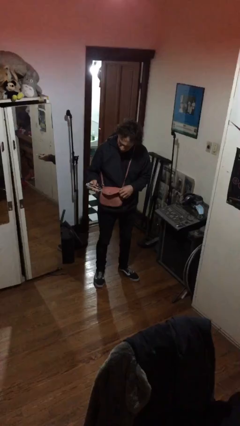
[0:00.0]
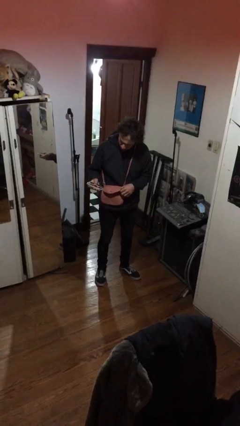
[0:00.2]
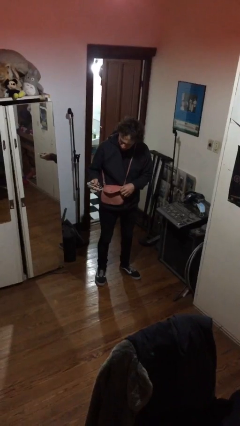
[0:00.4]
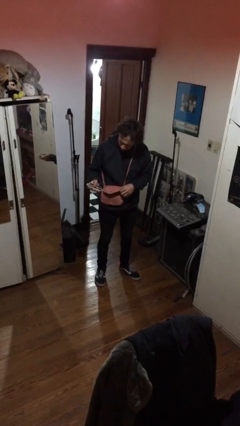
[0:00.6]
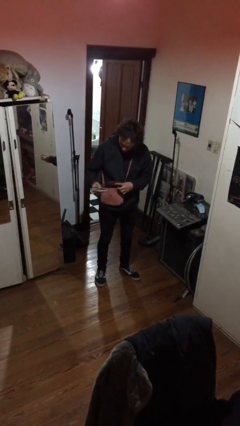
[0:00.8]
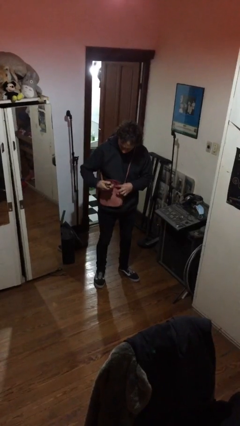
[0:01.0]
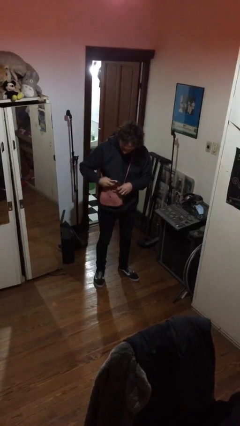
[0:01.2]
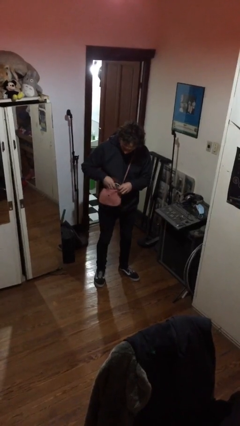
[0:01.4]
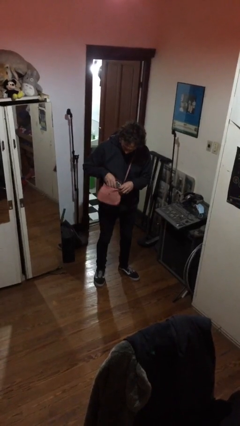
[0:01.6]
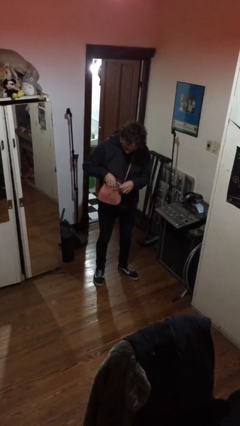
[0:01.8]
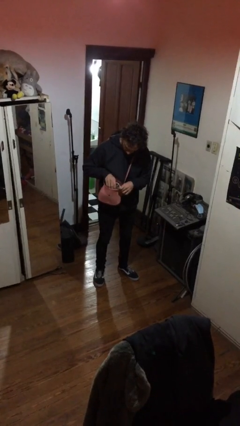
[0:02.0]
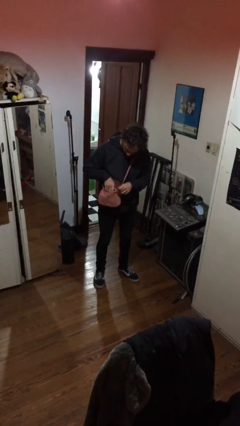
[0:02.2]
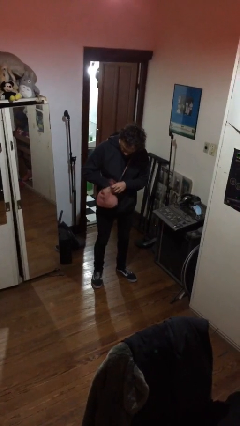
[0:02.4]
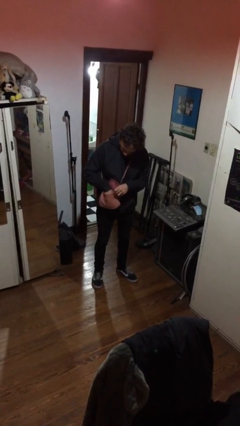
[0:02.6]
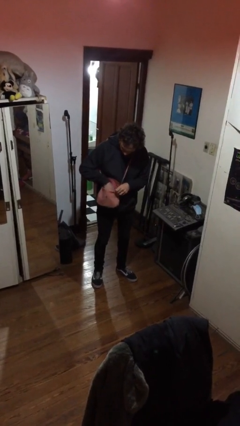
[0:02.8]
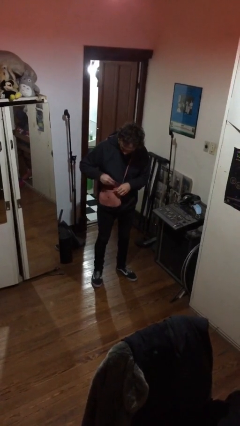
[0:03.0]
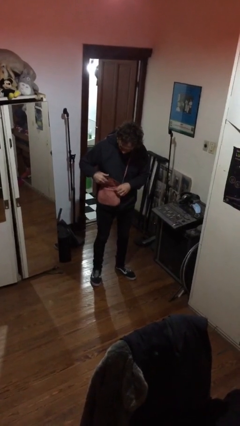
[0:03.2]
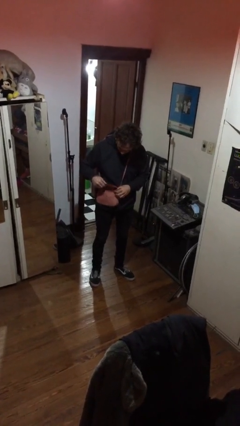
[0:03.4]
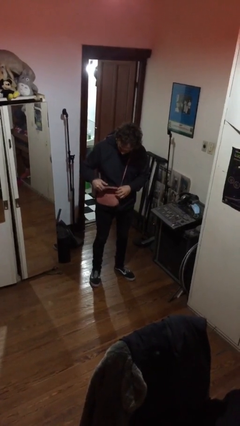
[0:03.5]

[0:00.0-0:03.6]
person puts object into purse

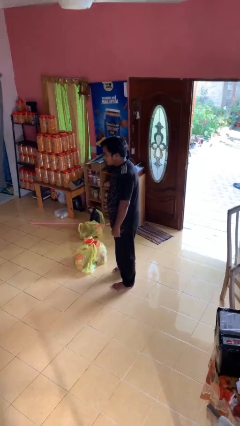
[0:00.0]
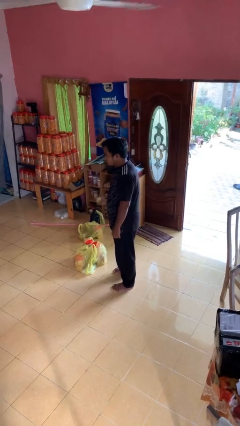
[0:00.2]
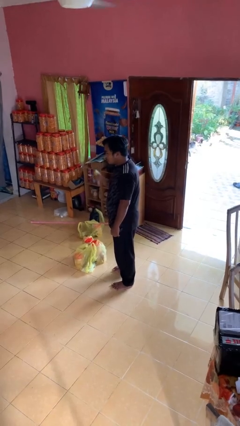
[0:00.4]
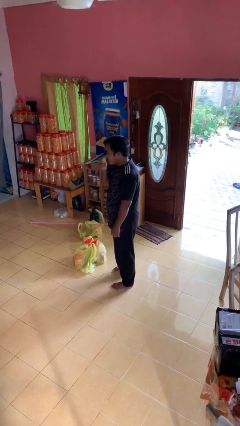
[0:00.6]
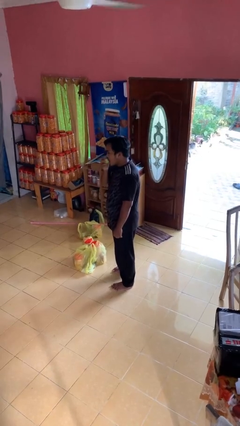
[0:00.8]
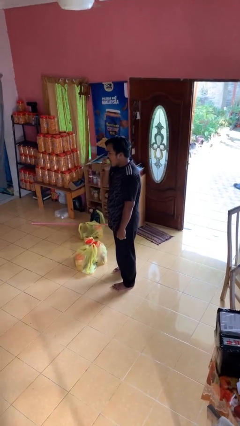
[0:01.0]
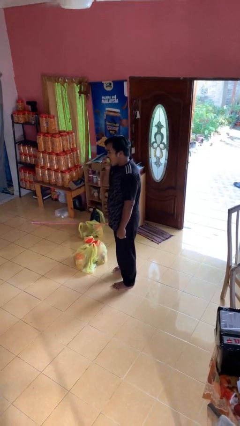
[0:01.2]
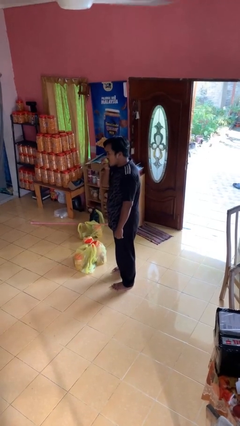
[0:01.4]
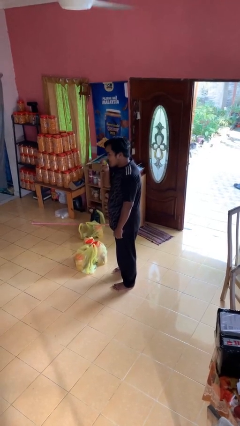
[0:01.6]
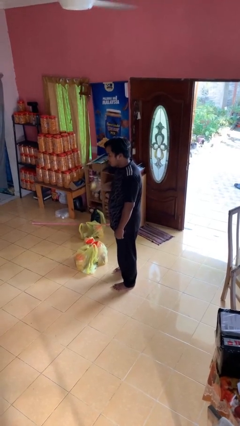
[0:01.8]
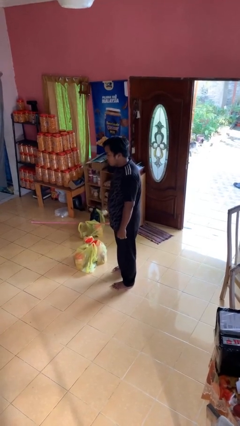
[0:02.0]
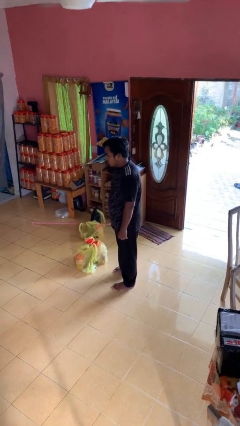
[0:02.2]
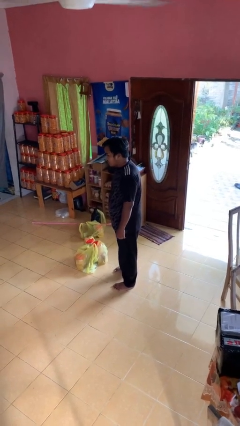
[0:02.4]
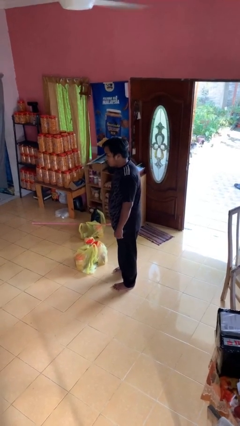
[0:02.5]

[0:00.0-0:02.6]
person eats apple

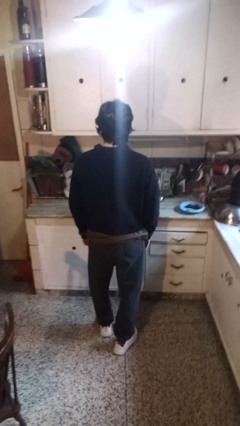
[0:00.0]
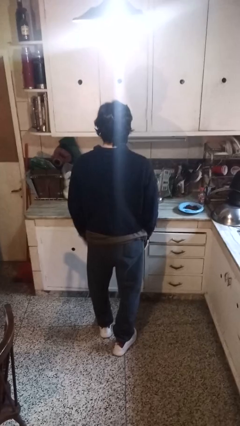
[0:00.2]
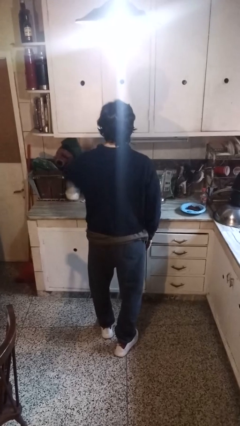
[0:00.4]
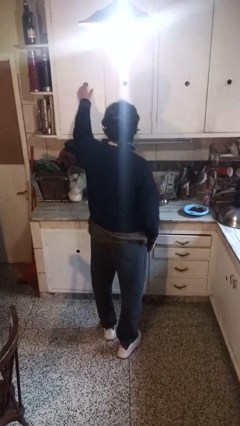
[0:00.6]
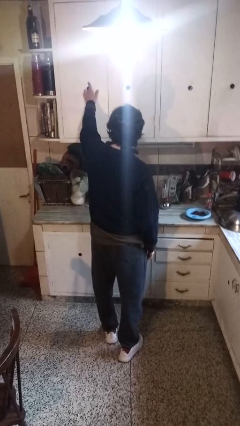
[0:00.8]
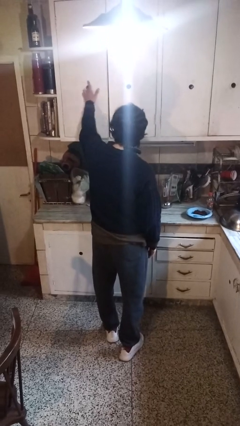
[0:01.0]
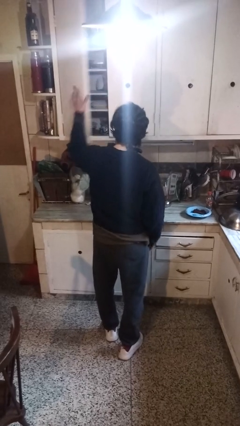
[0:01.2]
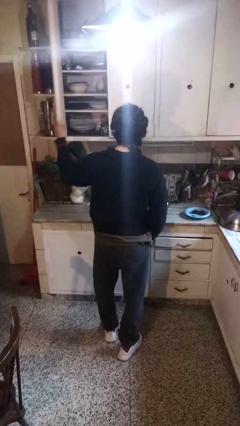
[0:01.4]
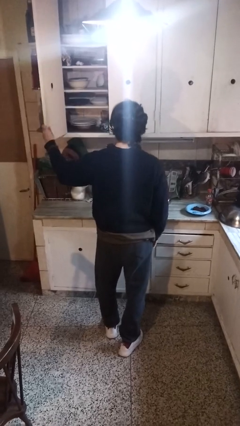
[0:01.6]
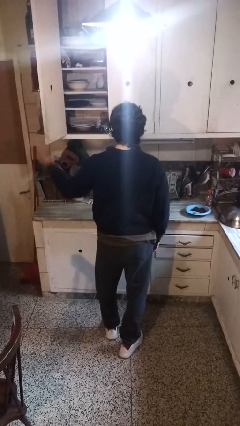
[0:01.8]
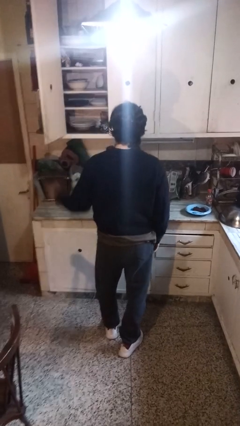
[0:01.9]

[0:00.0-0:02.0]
person opens cabinet

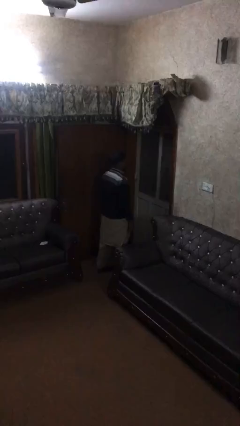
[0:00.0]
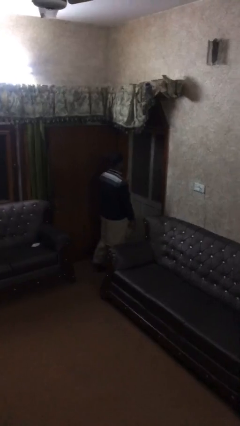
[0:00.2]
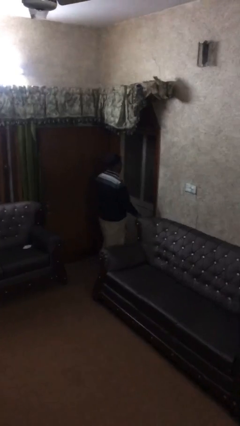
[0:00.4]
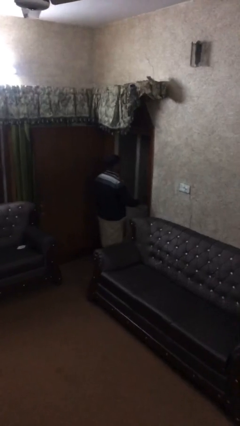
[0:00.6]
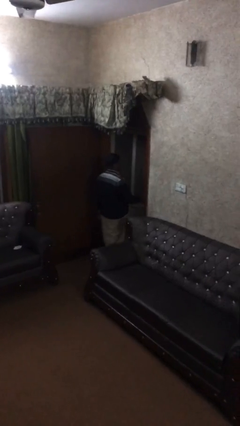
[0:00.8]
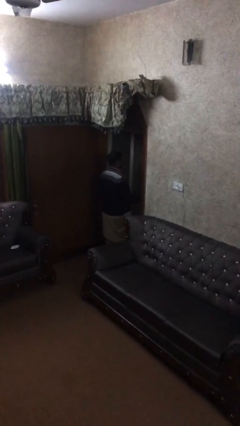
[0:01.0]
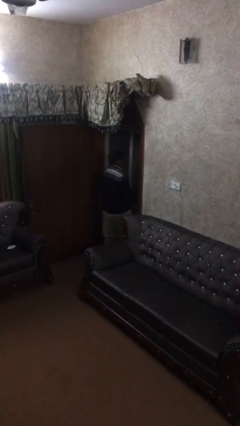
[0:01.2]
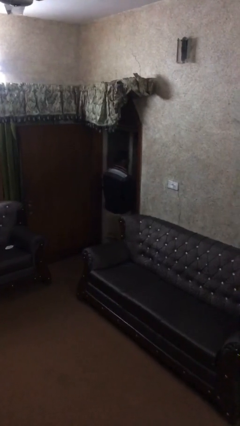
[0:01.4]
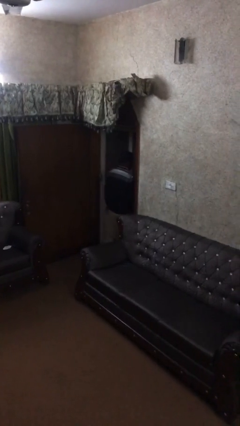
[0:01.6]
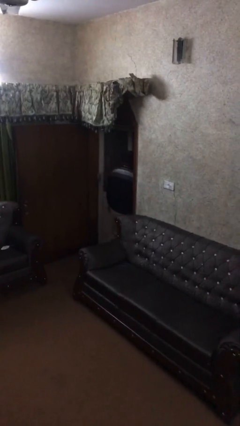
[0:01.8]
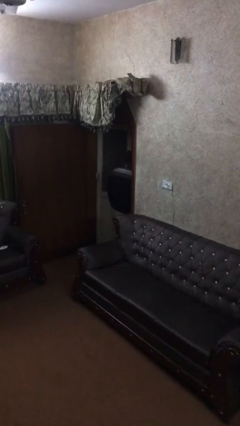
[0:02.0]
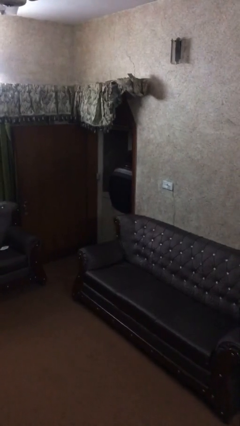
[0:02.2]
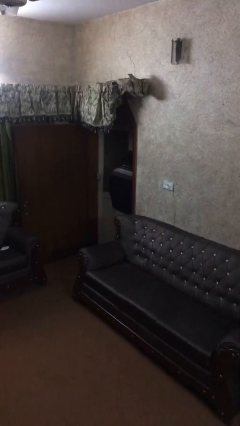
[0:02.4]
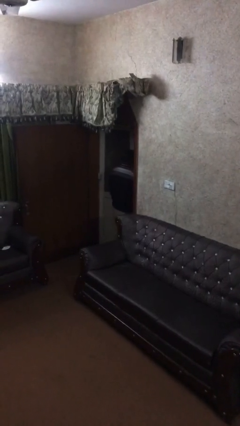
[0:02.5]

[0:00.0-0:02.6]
person opens facility door

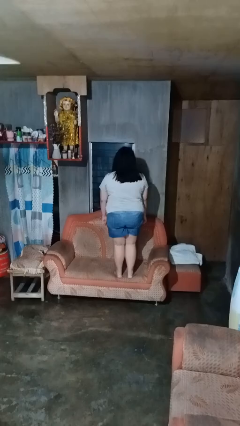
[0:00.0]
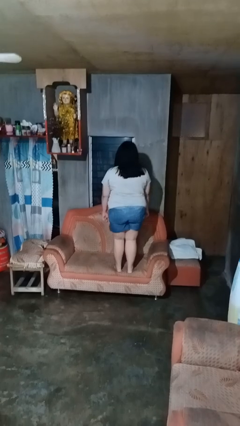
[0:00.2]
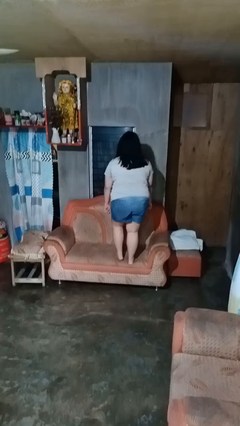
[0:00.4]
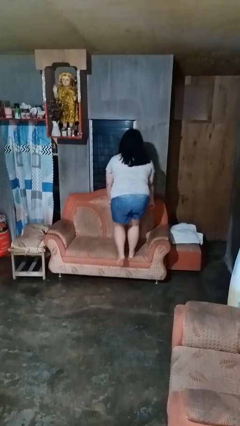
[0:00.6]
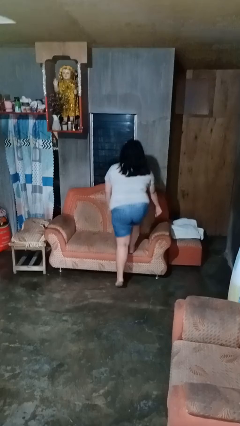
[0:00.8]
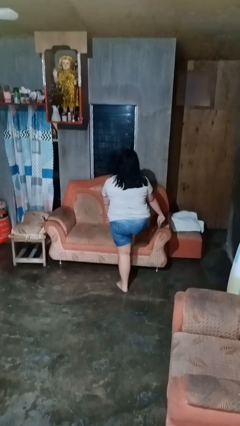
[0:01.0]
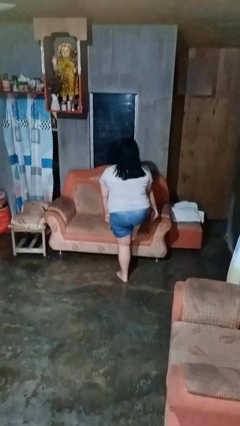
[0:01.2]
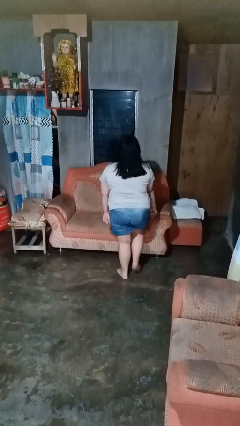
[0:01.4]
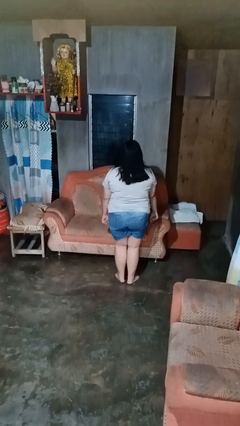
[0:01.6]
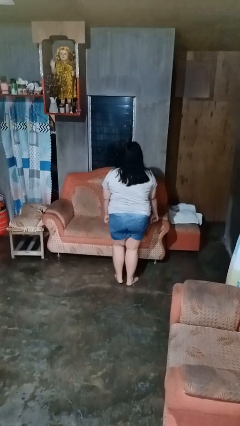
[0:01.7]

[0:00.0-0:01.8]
person climbs off couch

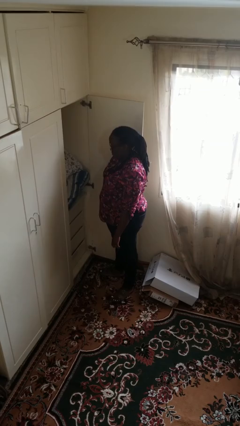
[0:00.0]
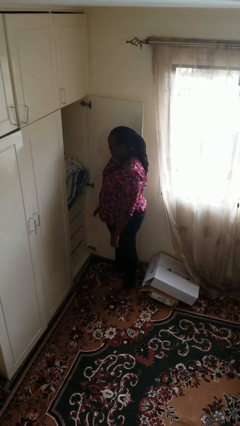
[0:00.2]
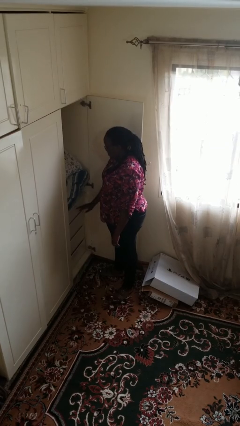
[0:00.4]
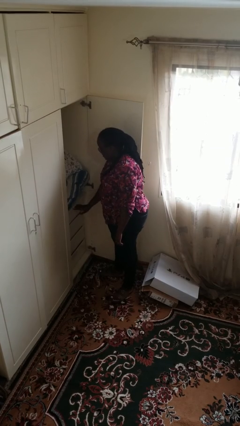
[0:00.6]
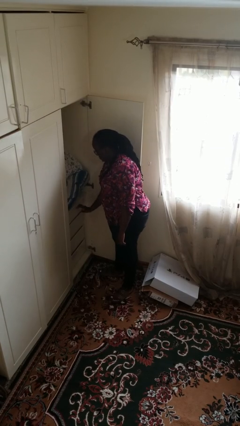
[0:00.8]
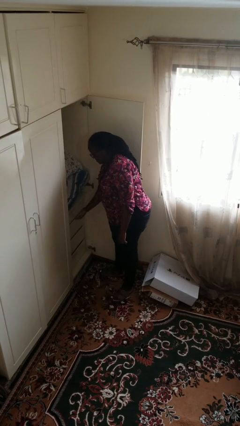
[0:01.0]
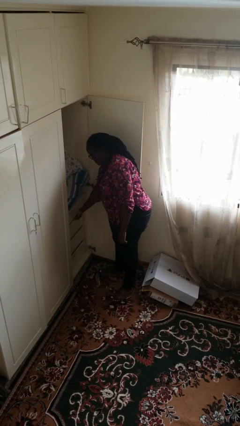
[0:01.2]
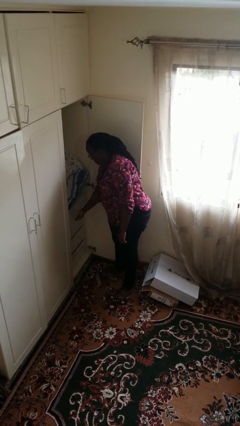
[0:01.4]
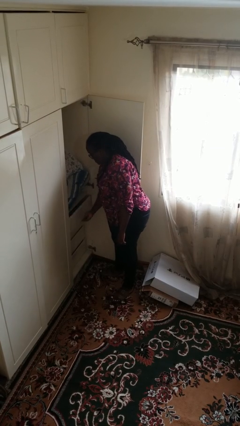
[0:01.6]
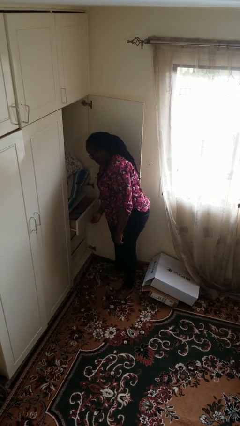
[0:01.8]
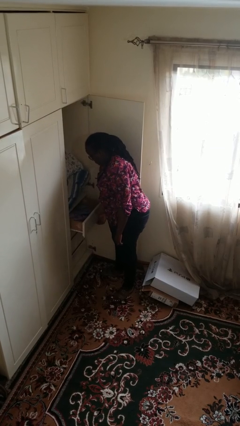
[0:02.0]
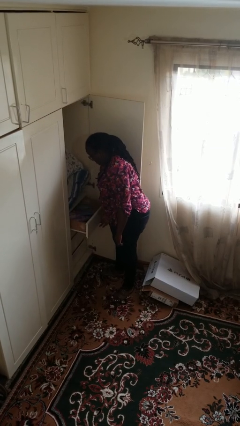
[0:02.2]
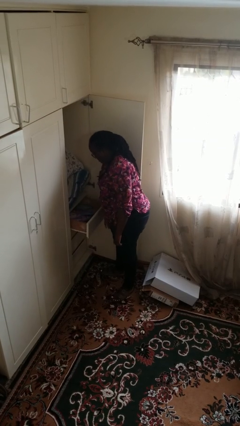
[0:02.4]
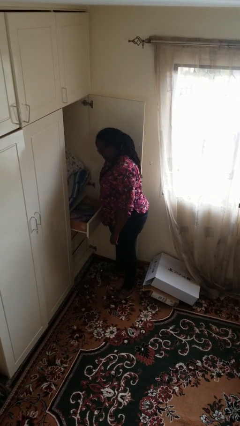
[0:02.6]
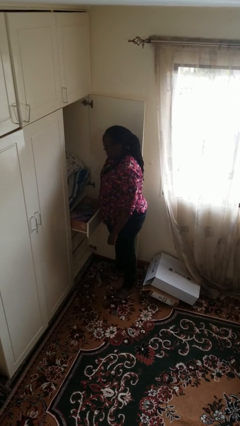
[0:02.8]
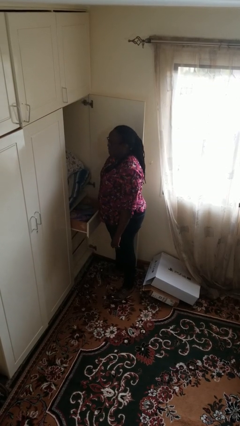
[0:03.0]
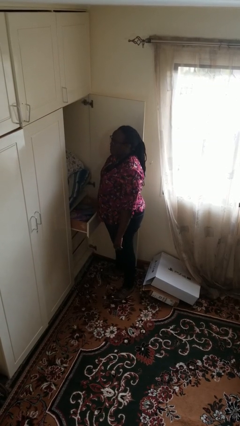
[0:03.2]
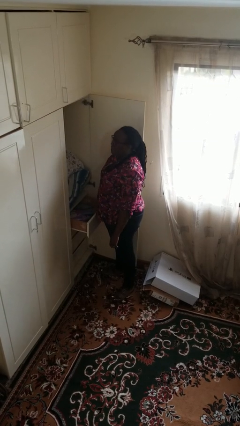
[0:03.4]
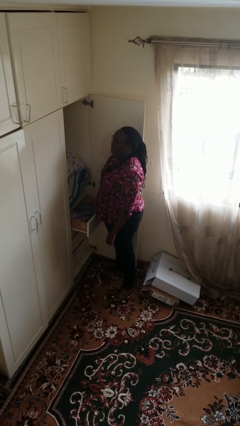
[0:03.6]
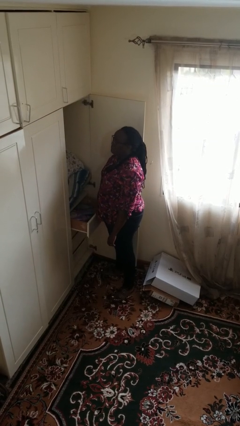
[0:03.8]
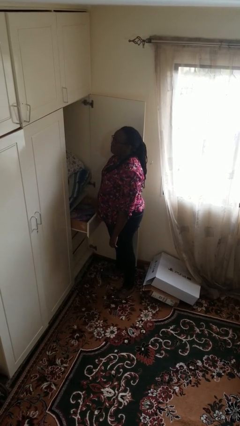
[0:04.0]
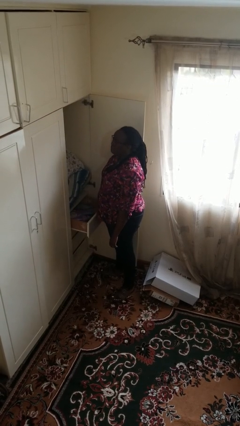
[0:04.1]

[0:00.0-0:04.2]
person opens dresser drawer

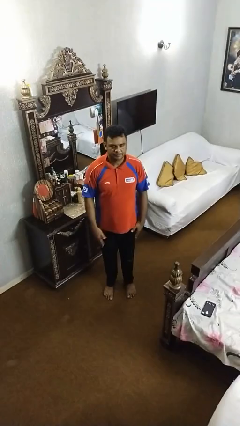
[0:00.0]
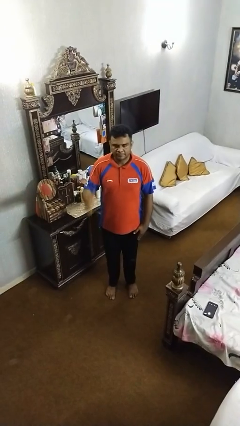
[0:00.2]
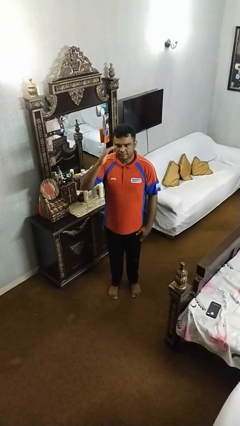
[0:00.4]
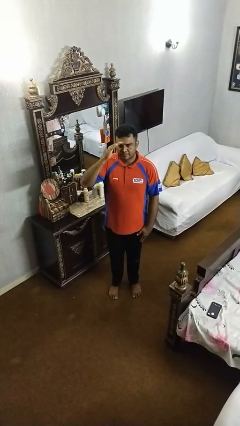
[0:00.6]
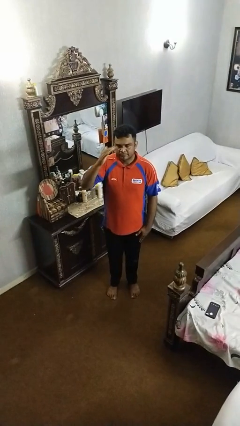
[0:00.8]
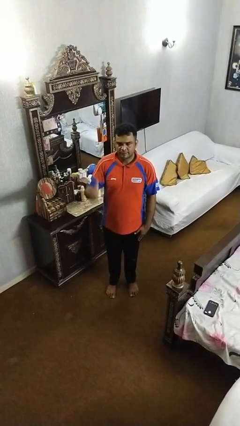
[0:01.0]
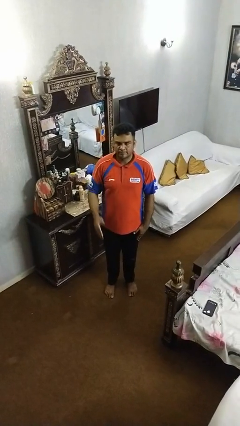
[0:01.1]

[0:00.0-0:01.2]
person salutes
